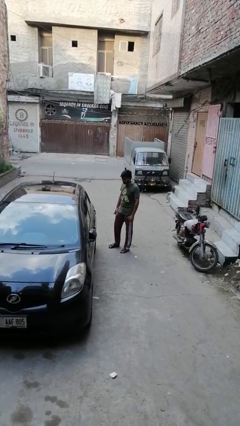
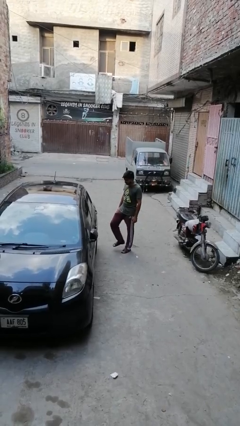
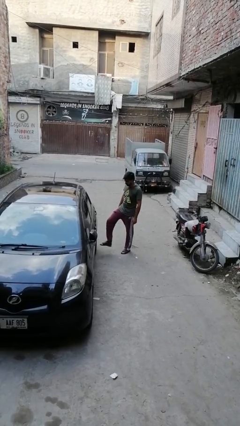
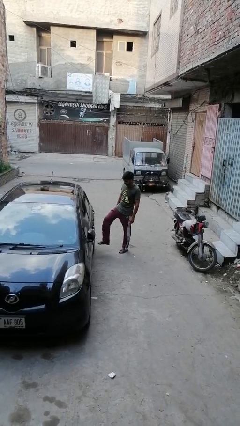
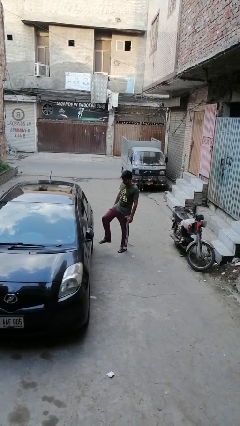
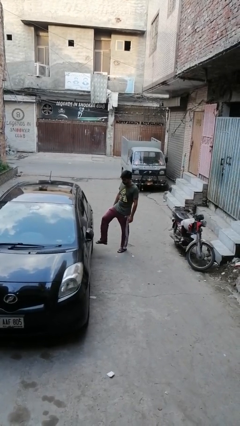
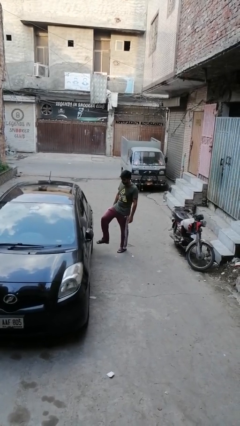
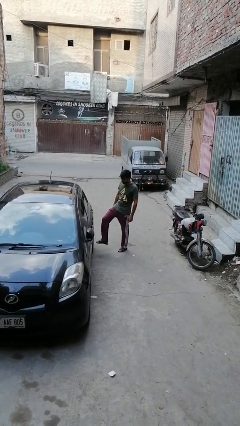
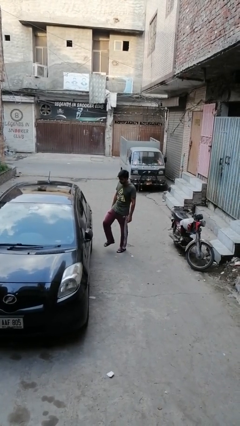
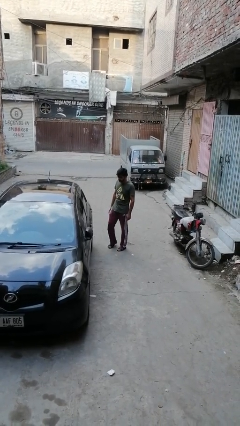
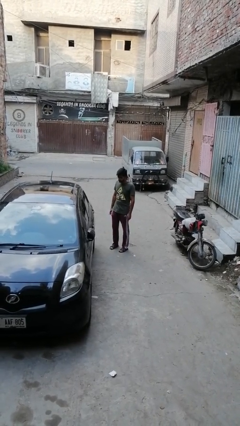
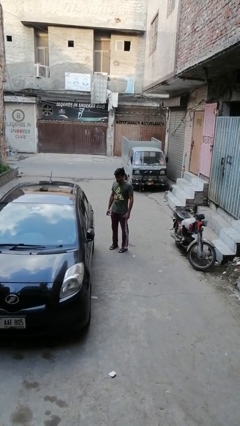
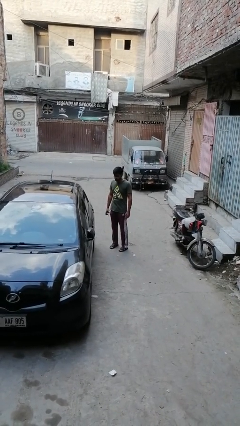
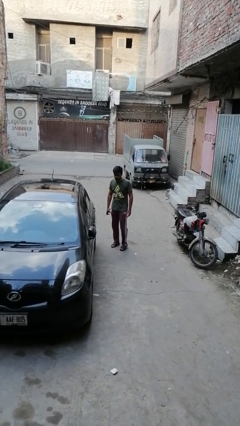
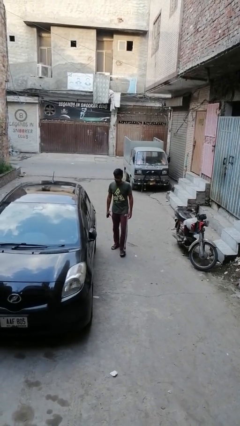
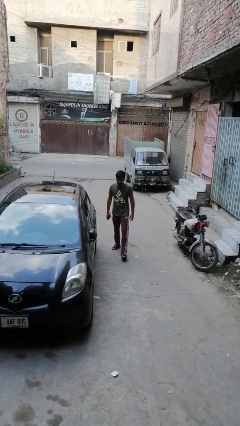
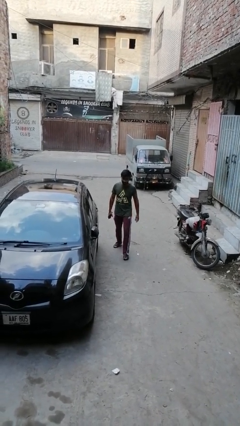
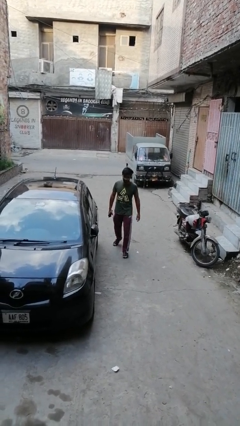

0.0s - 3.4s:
person kicks car tires

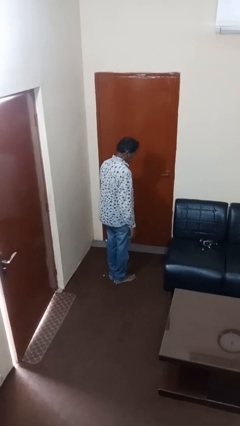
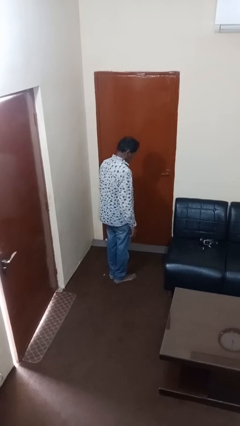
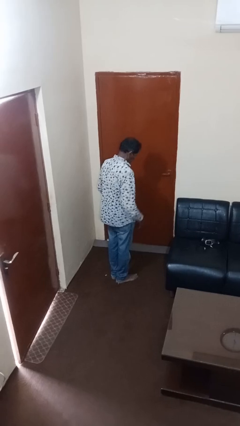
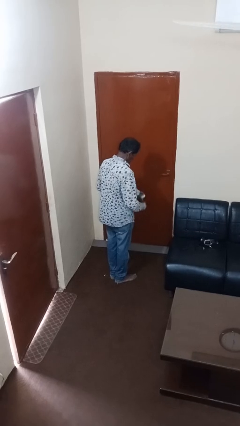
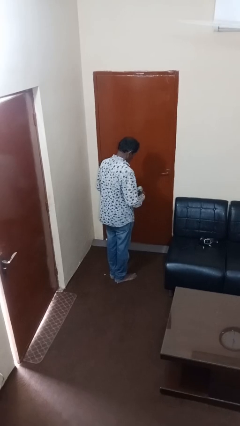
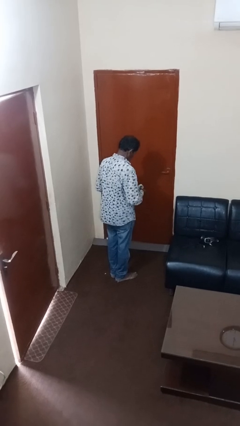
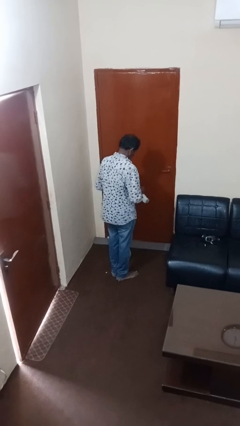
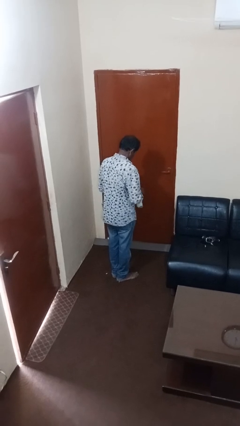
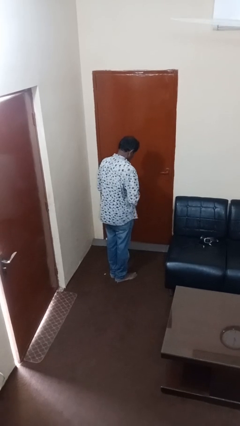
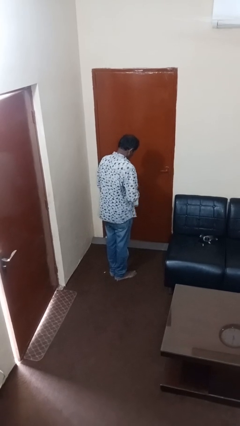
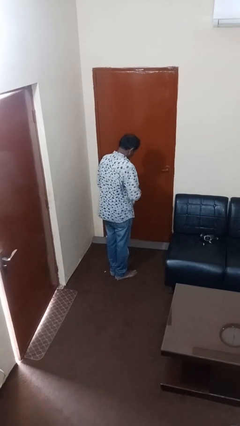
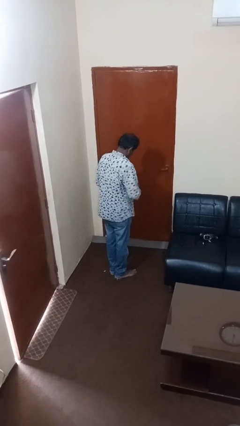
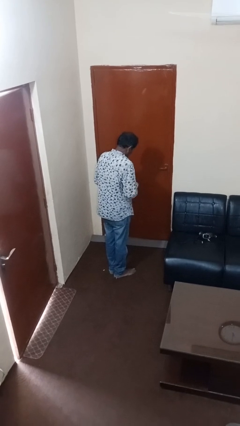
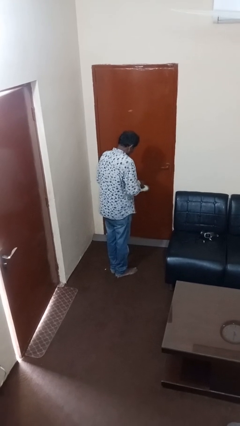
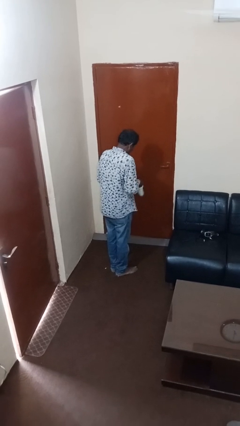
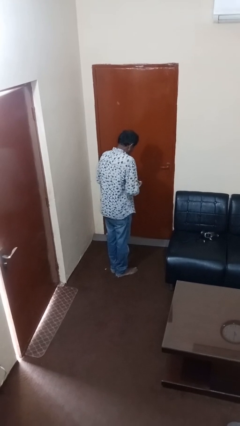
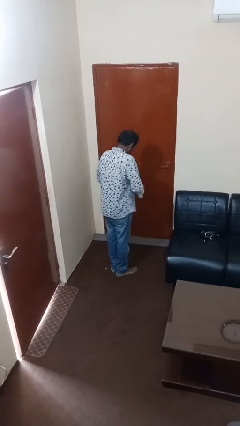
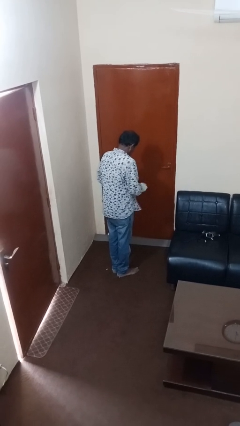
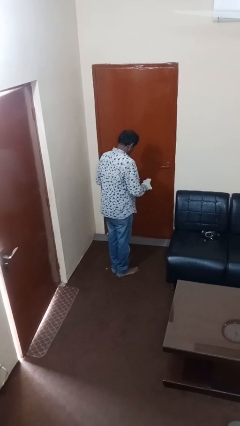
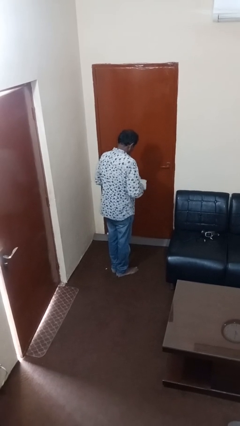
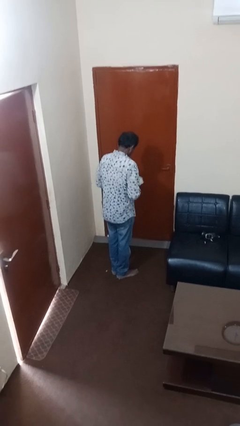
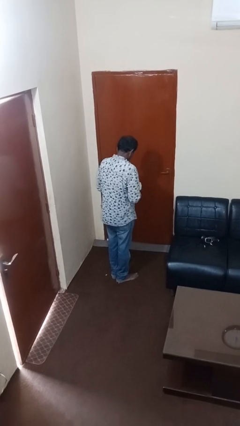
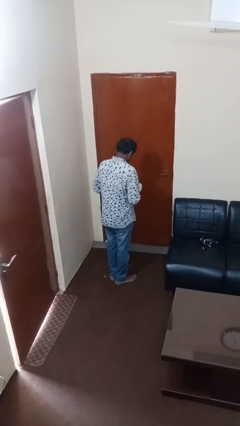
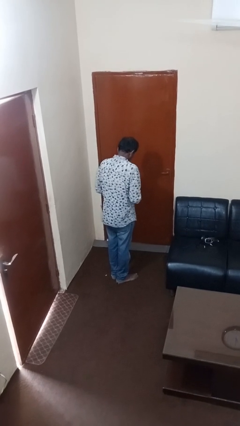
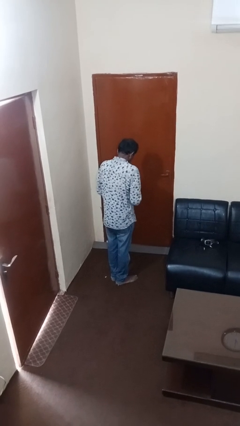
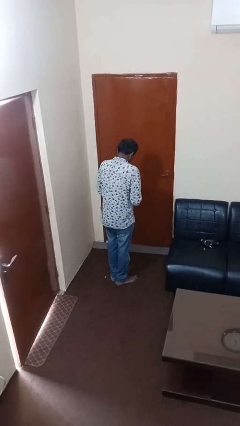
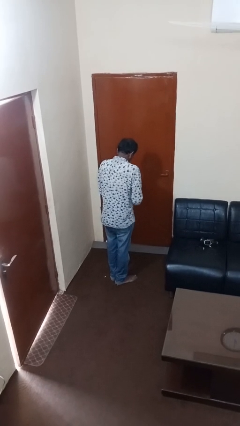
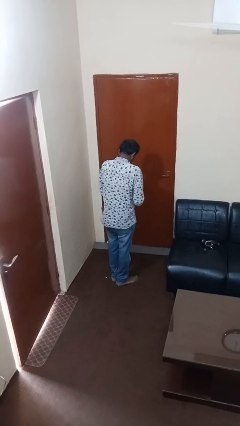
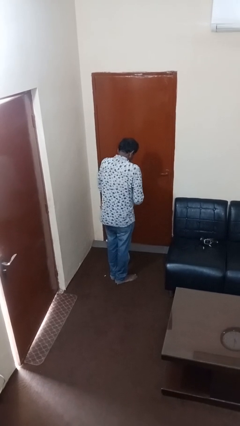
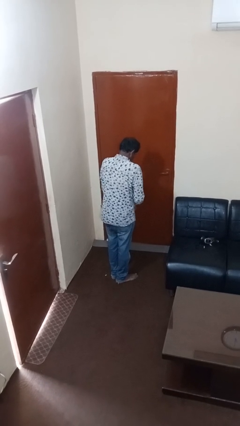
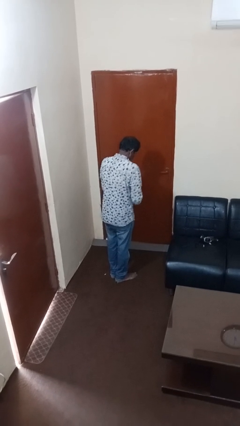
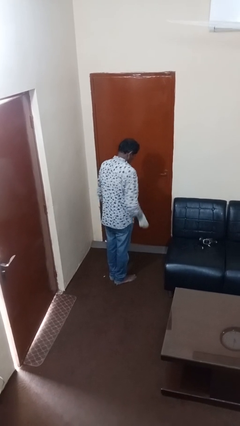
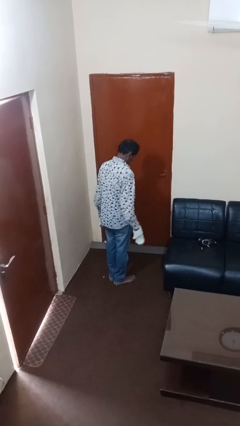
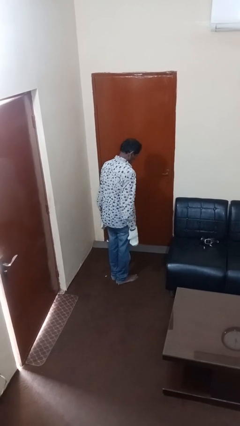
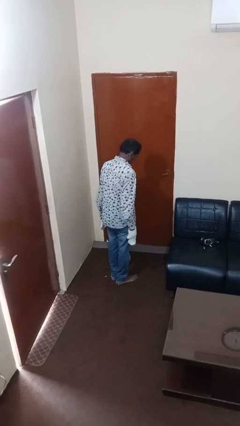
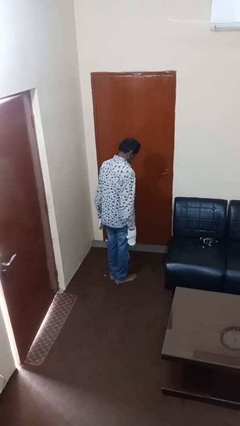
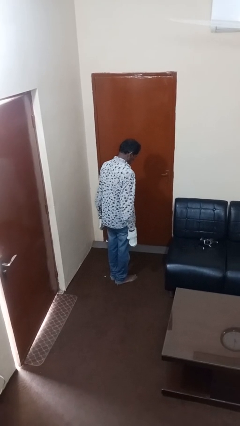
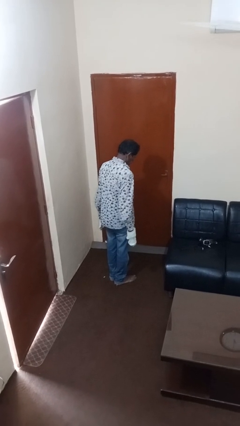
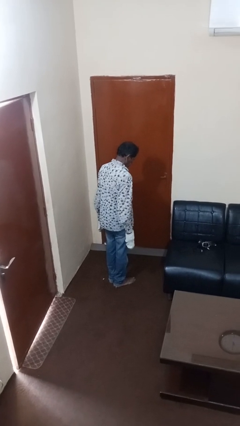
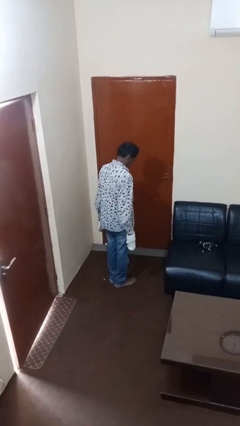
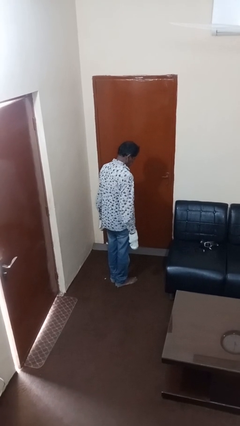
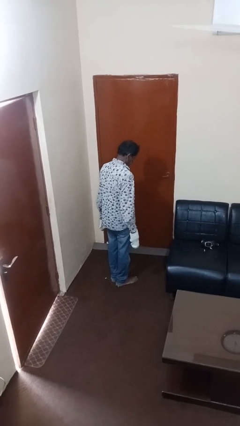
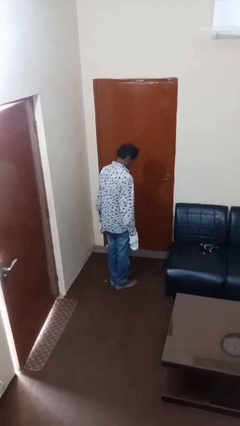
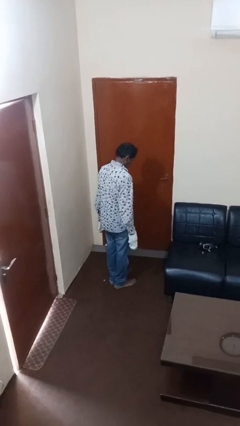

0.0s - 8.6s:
person puts on gloves

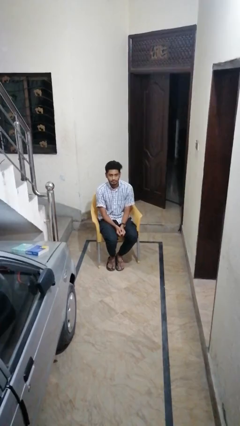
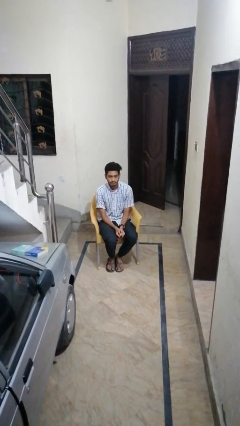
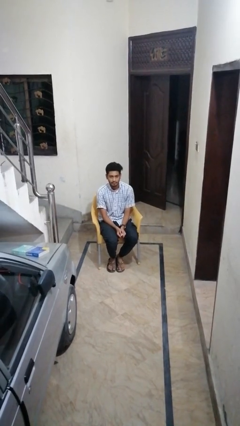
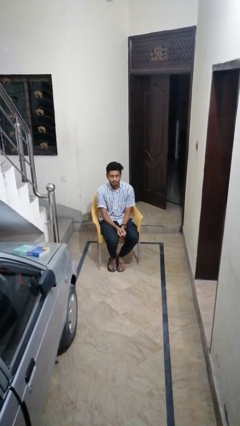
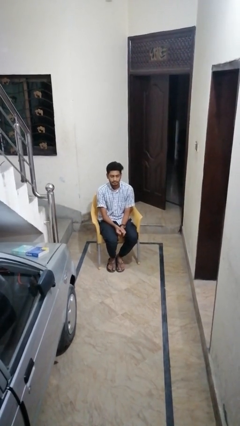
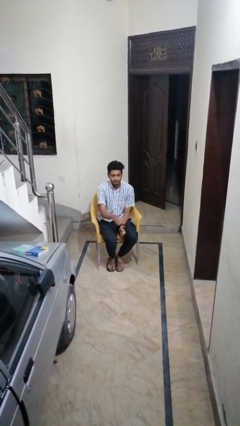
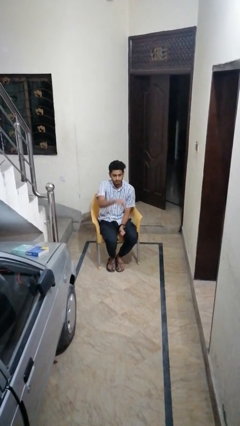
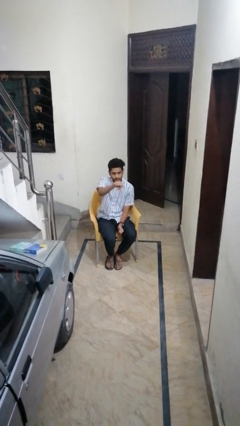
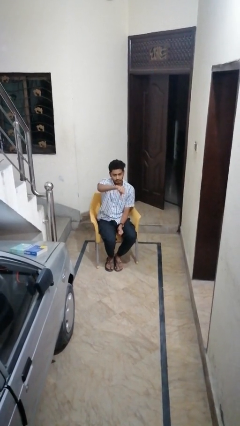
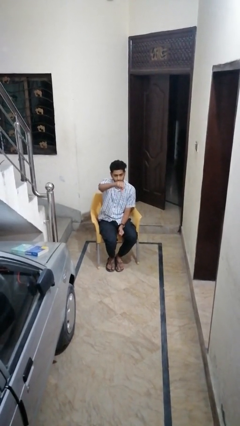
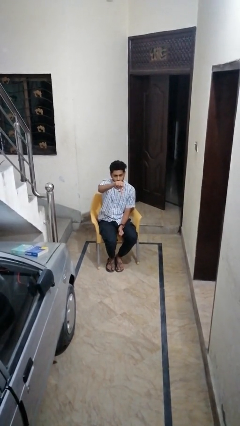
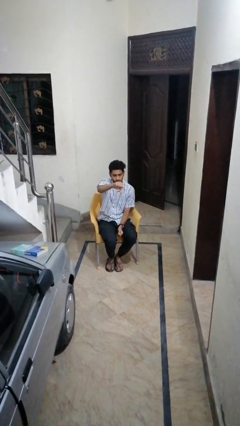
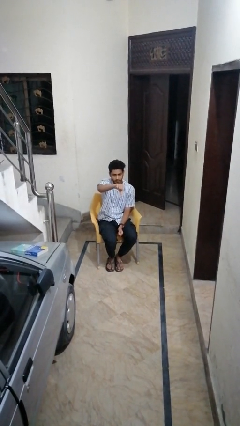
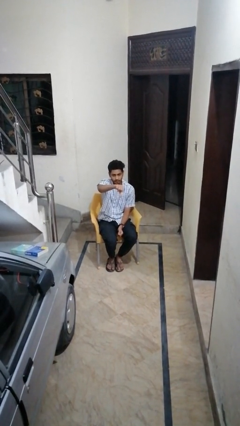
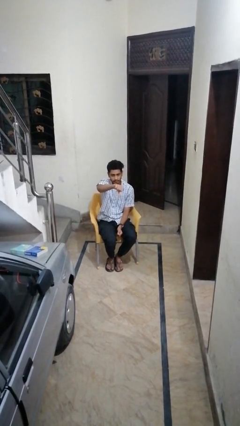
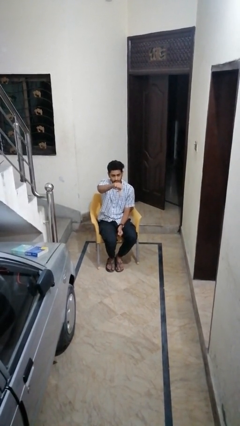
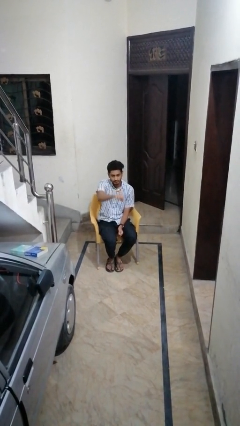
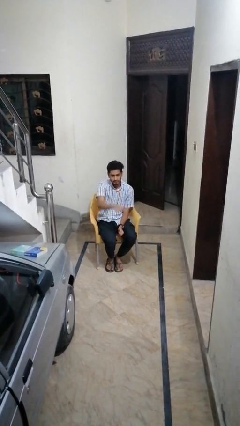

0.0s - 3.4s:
person gestures thumbs down

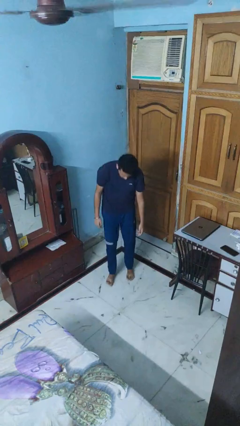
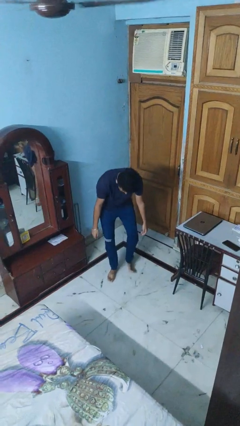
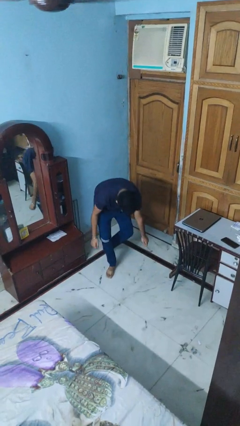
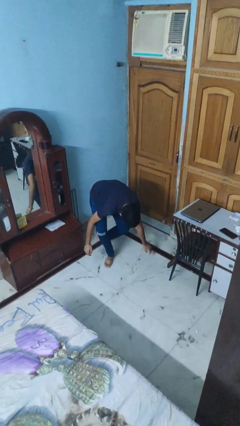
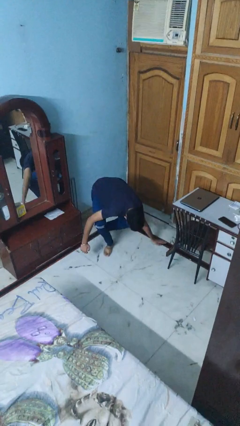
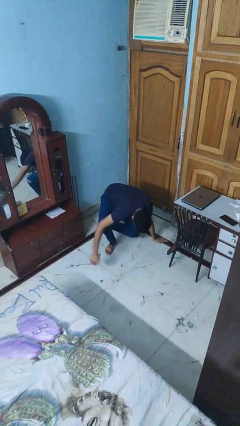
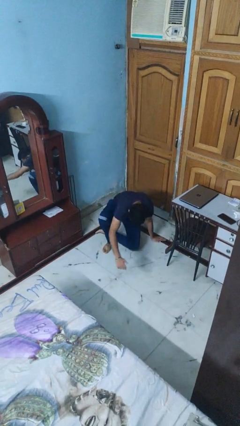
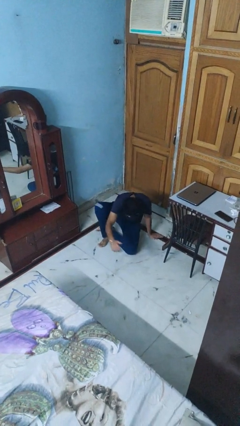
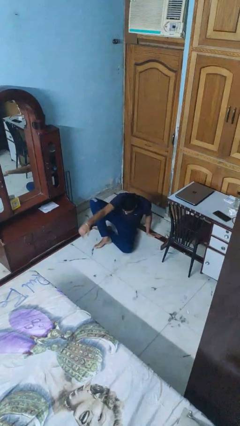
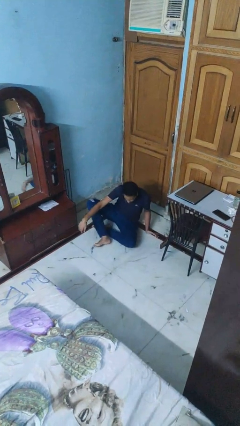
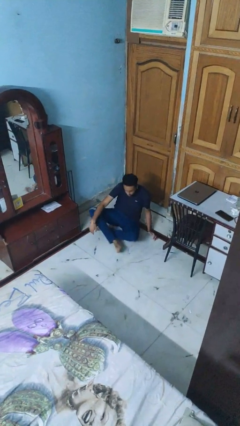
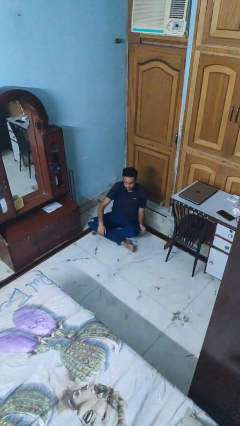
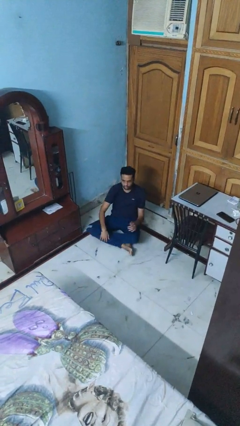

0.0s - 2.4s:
person sits crisscross
